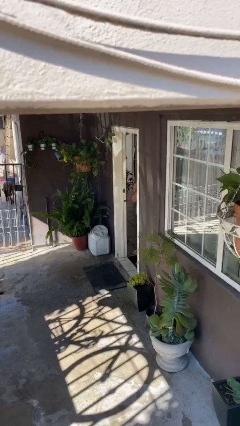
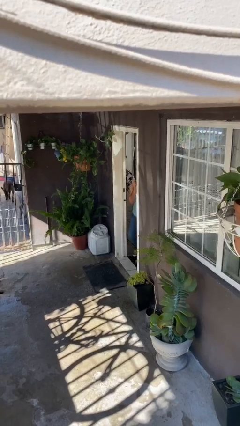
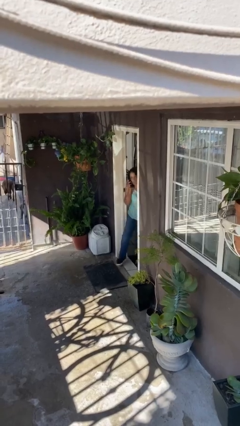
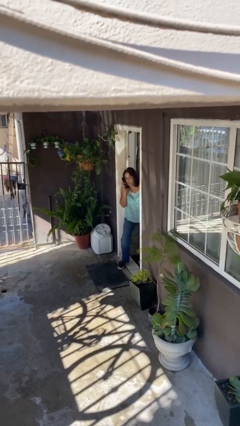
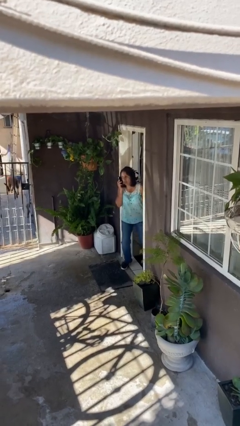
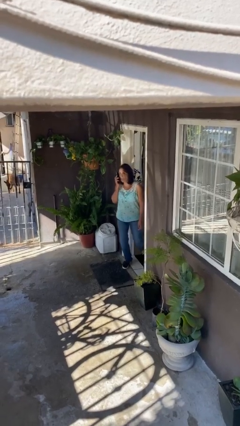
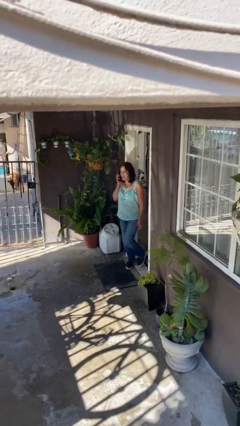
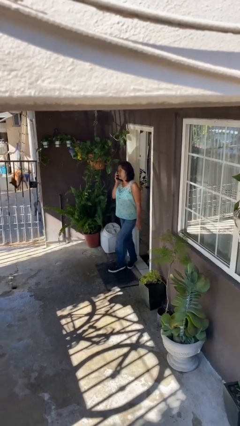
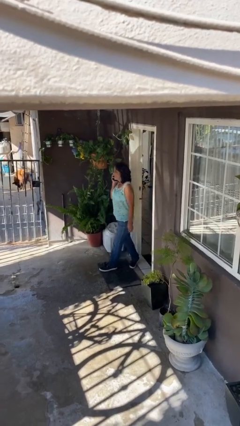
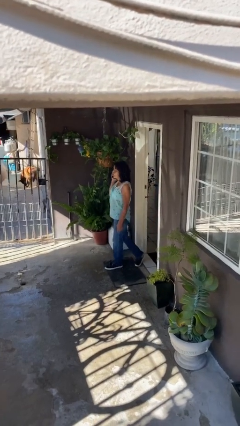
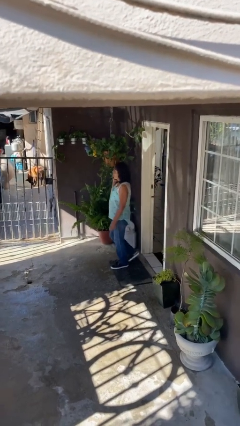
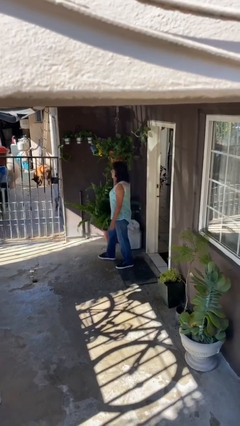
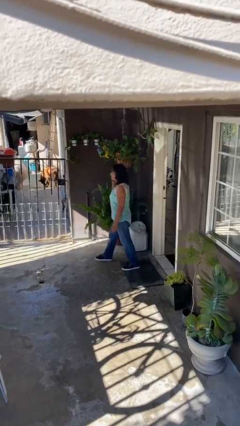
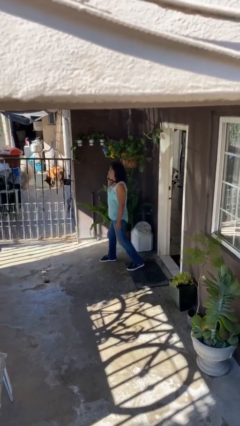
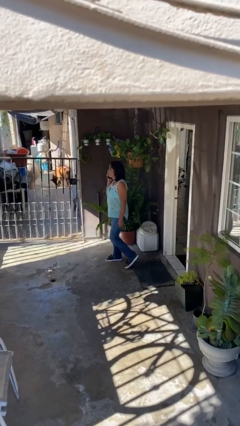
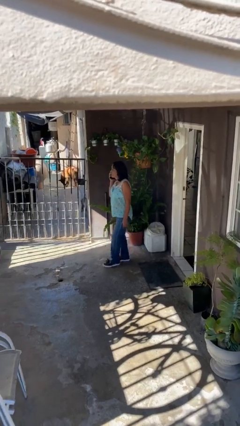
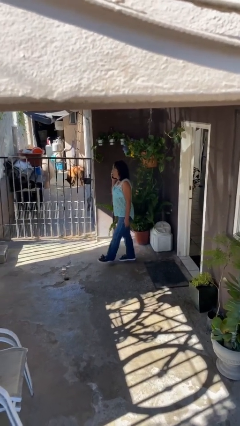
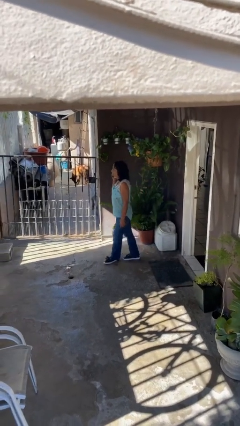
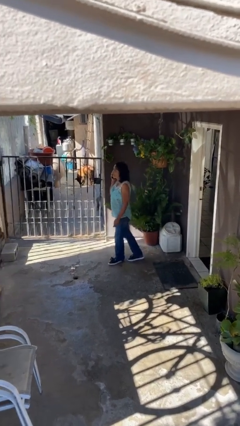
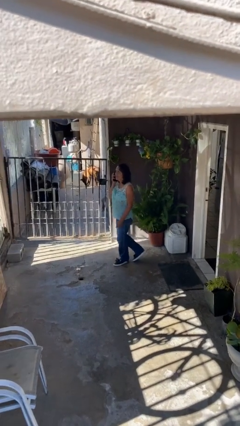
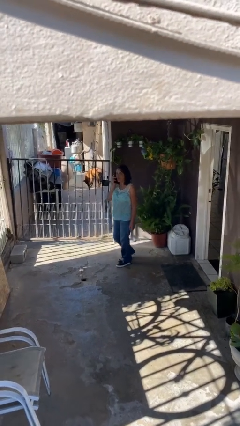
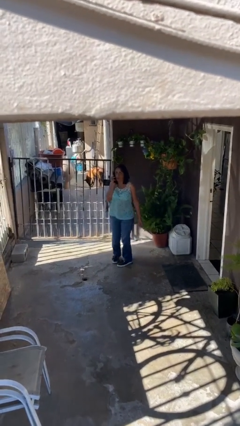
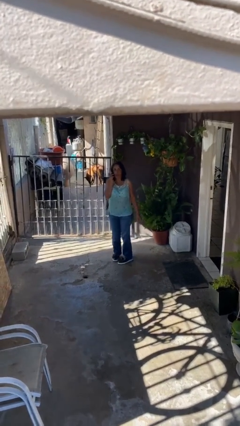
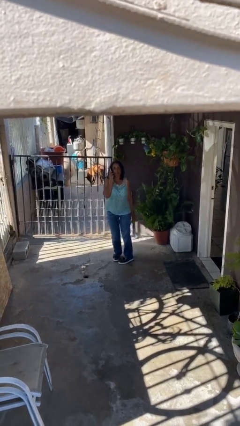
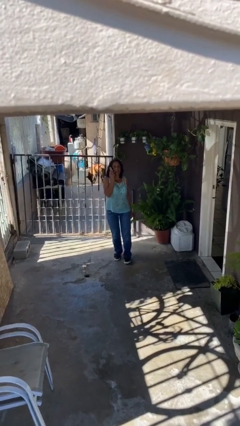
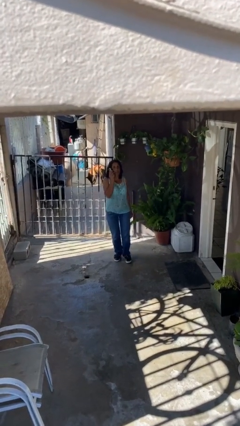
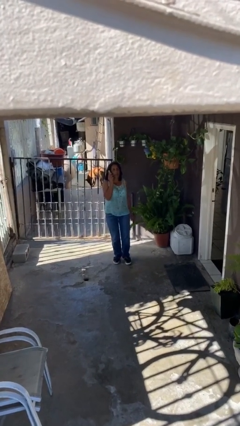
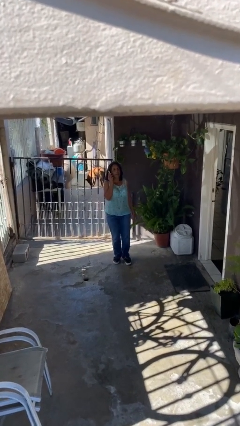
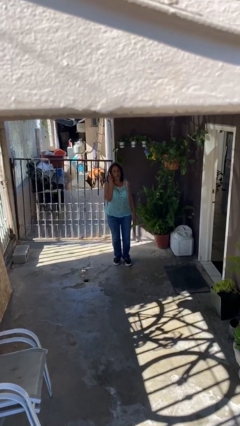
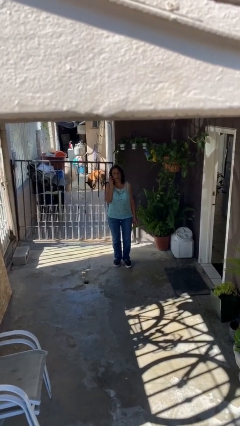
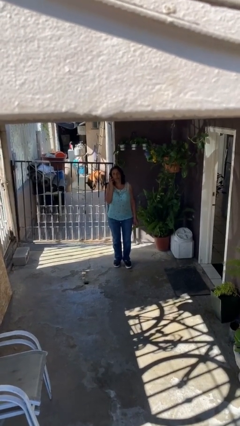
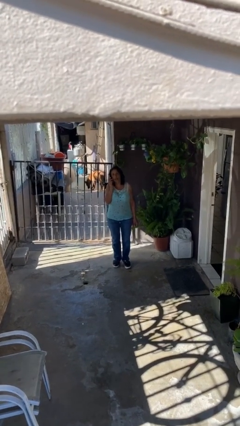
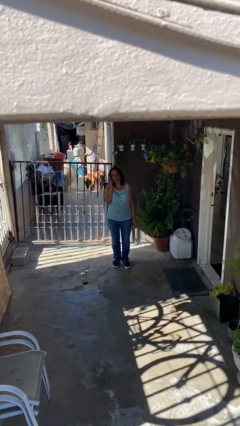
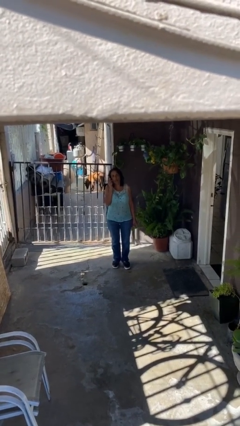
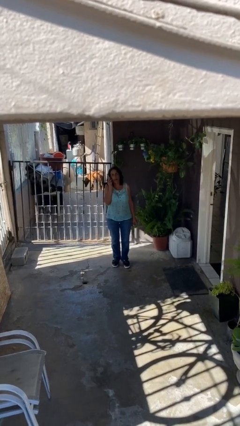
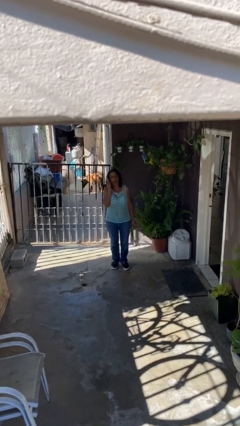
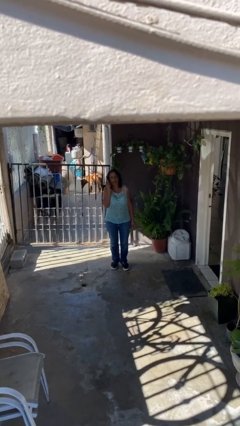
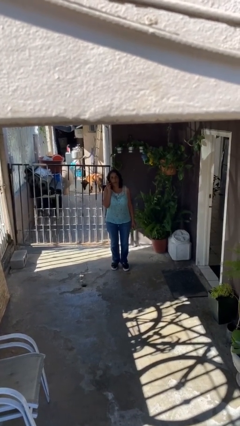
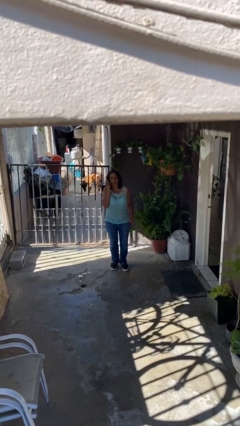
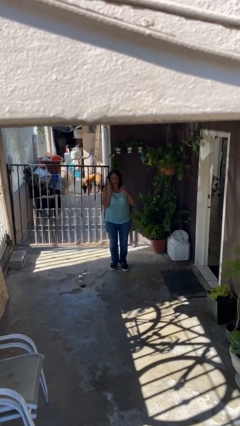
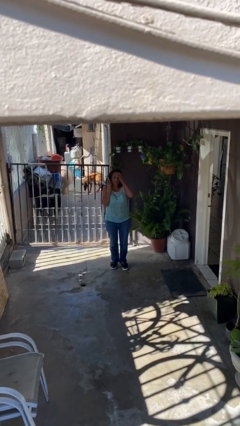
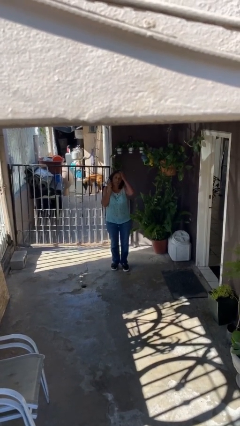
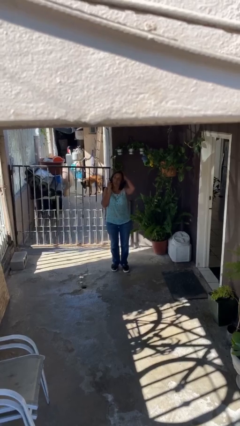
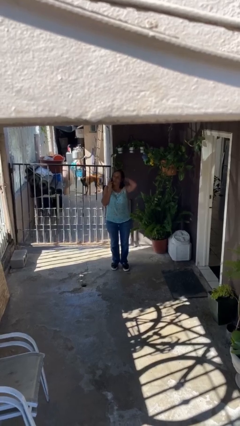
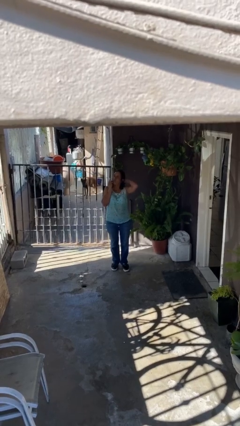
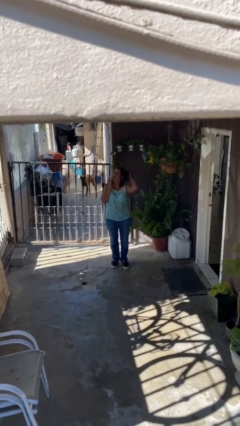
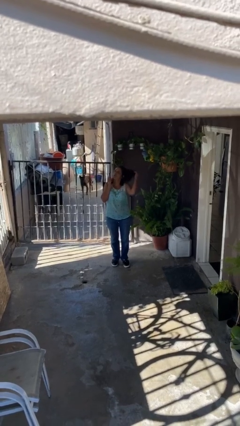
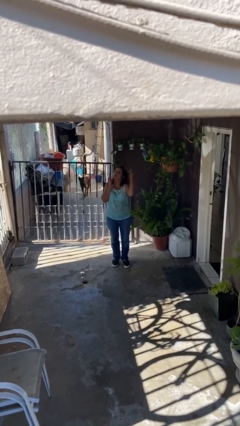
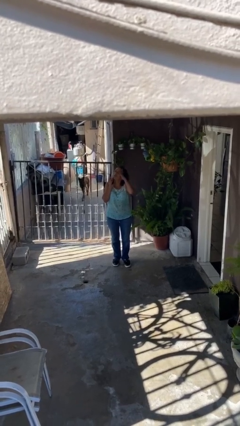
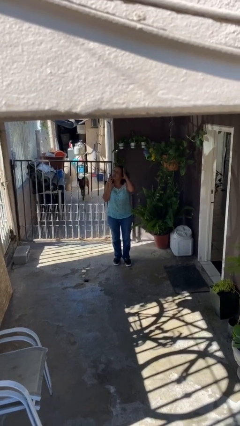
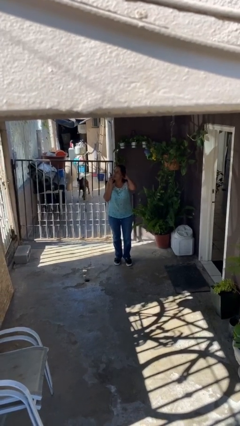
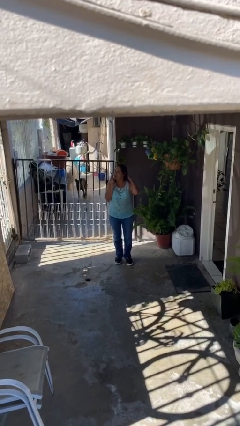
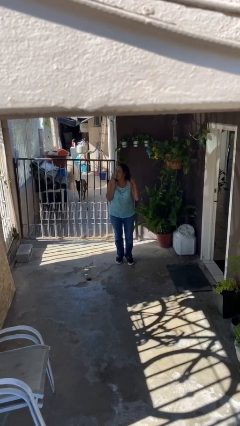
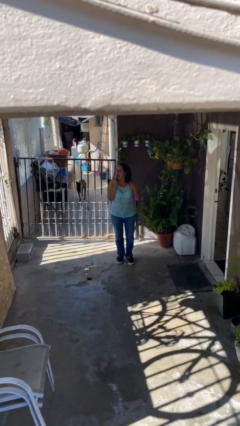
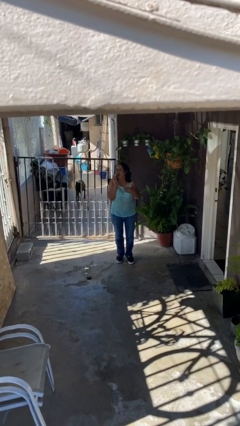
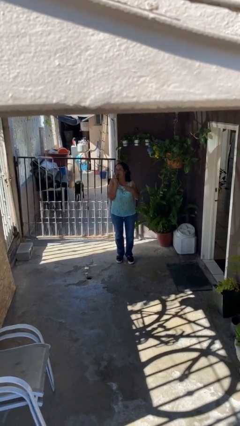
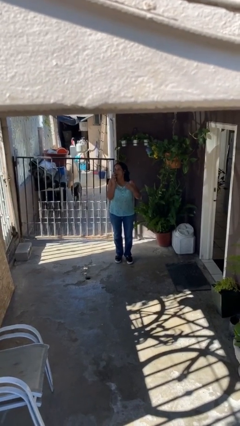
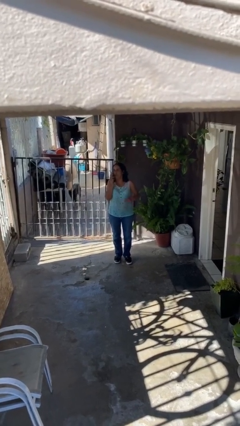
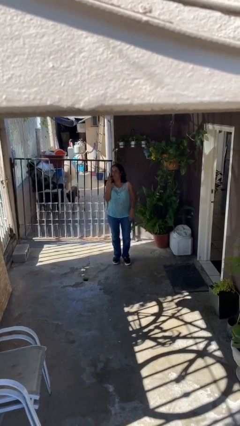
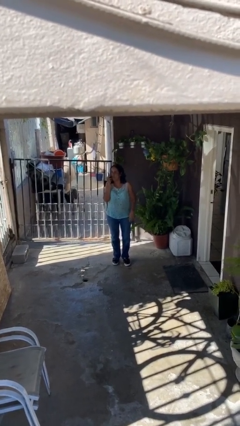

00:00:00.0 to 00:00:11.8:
person enters scene through structure

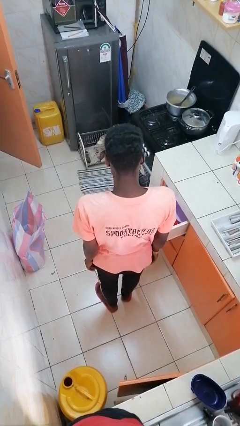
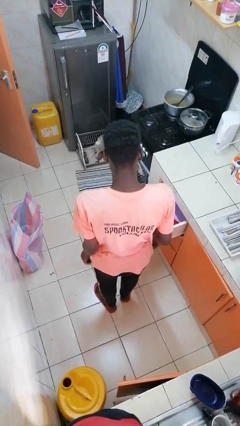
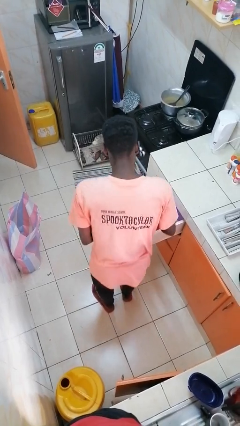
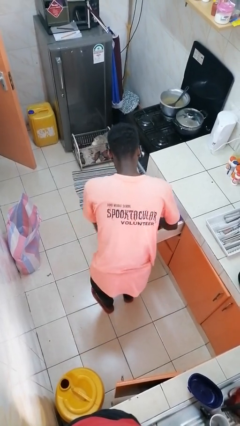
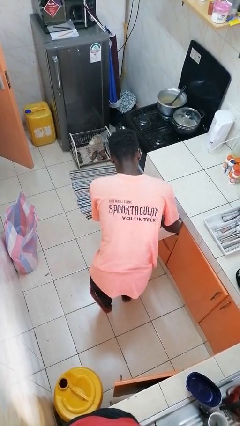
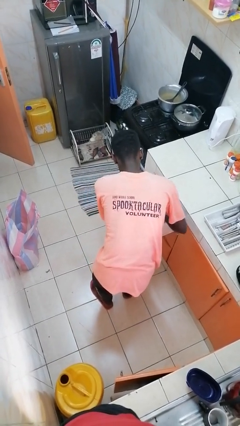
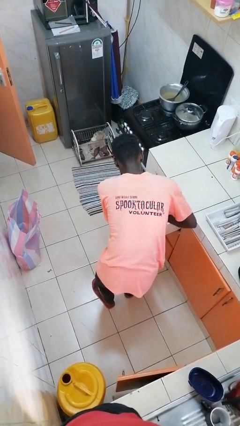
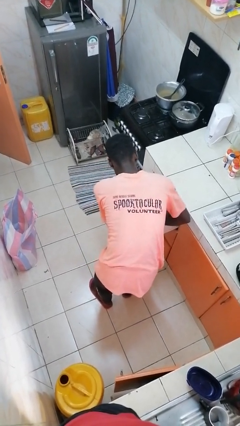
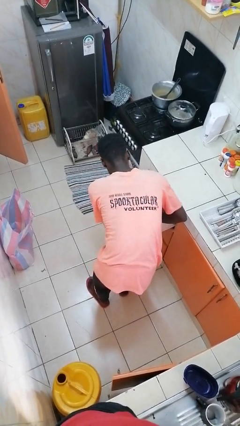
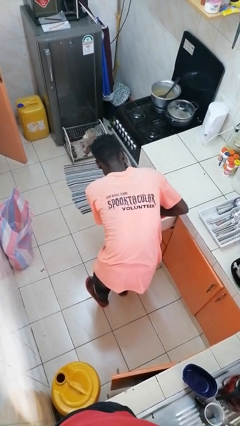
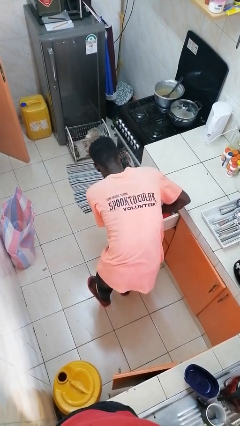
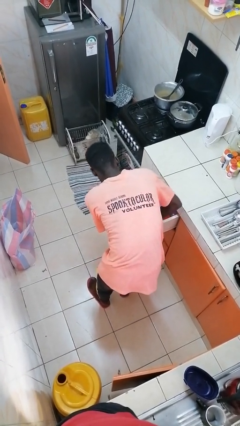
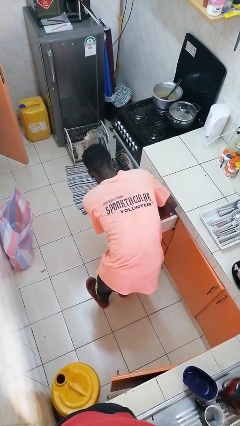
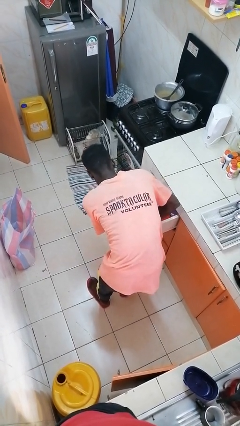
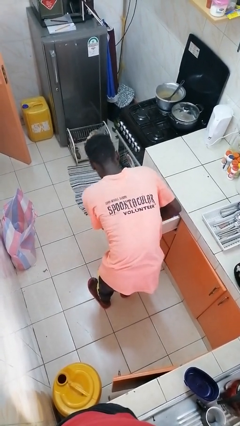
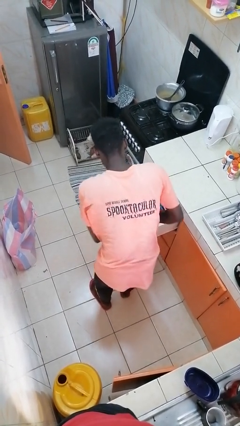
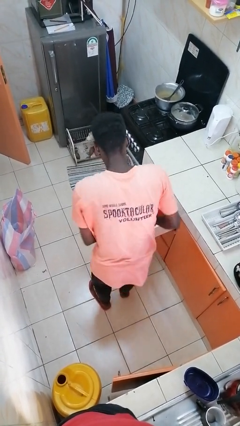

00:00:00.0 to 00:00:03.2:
person searches in kitchen drawer

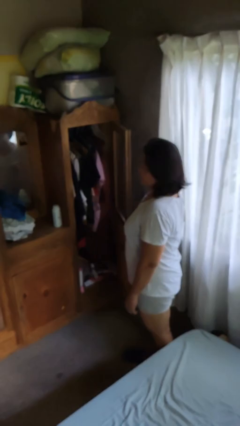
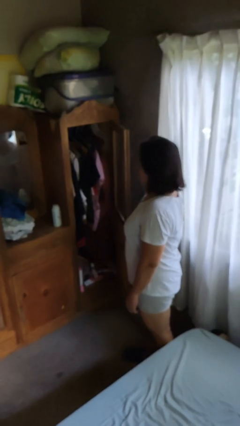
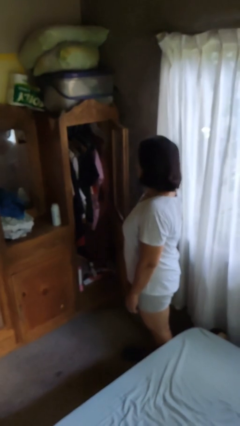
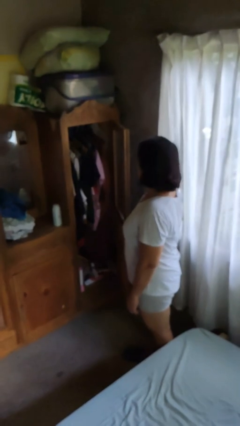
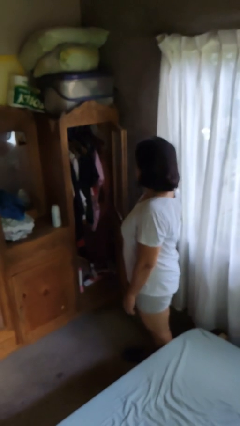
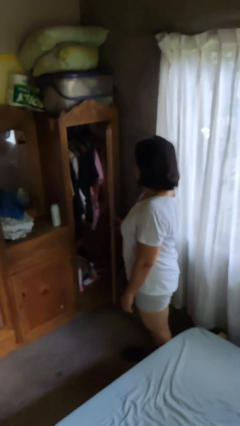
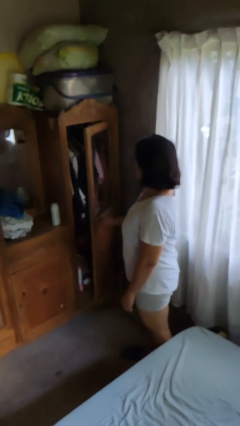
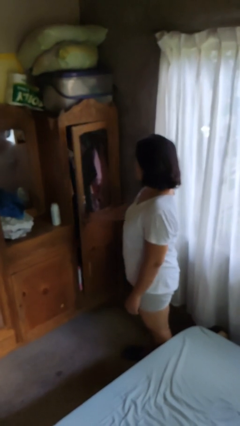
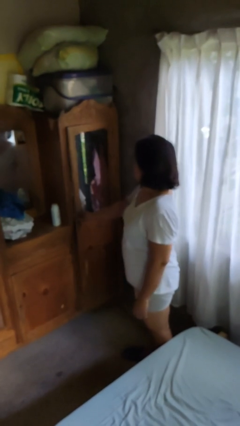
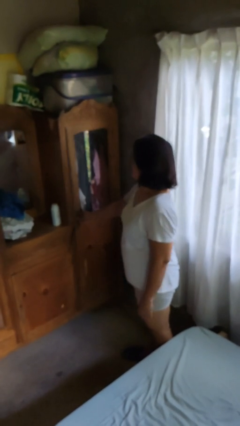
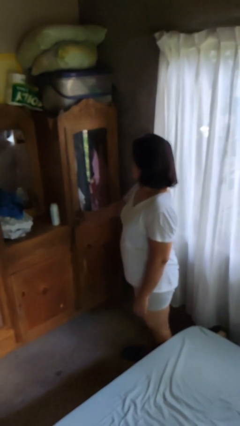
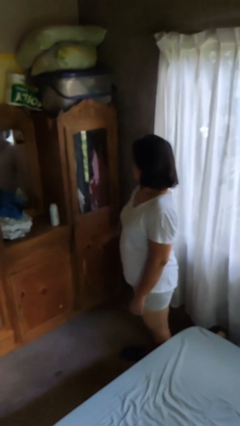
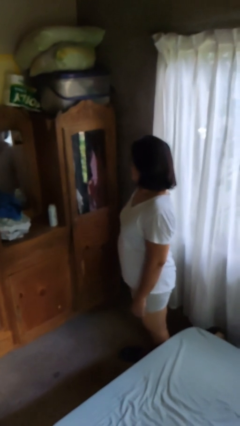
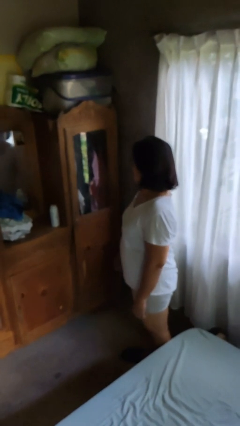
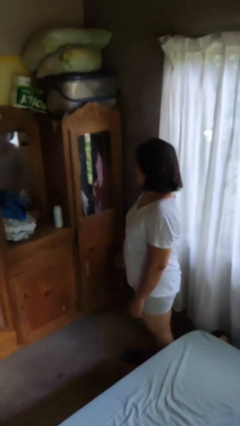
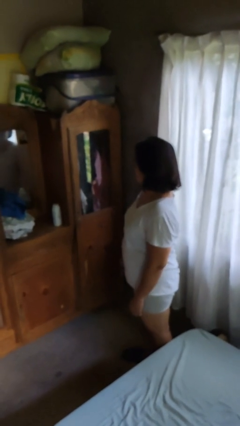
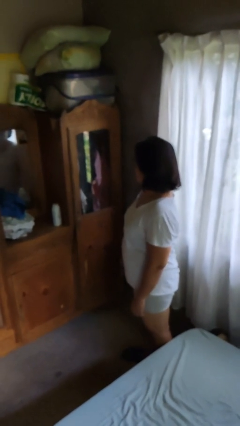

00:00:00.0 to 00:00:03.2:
person closes dresser drawer
